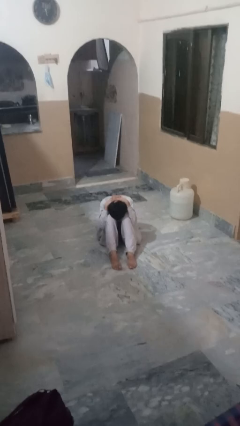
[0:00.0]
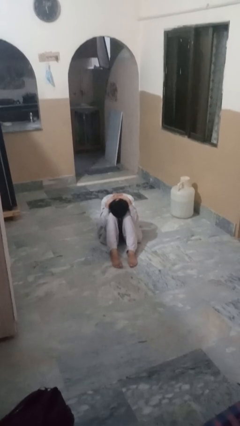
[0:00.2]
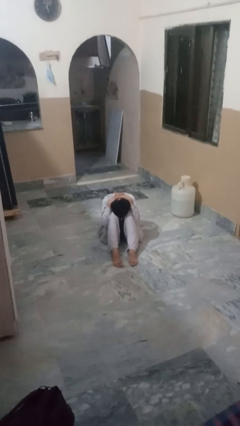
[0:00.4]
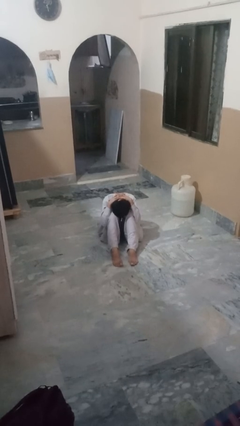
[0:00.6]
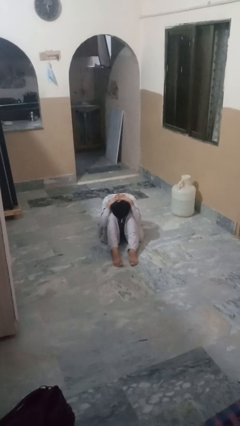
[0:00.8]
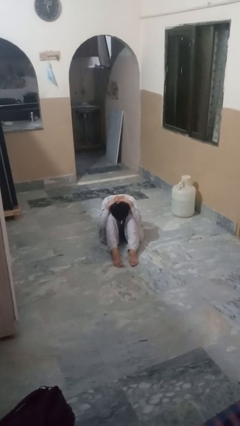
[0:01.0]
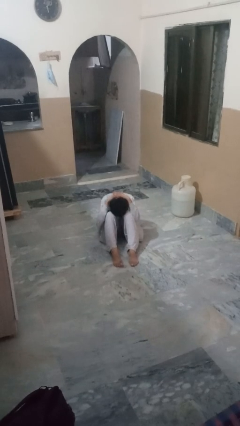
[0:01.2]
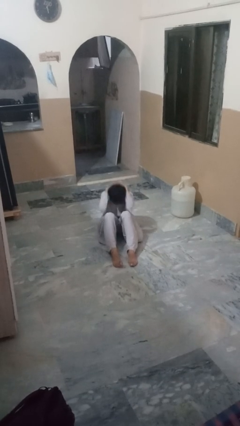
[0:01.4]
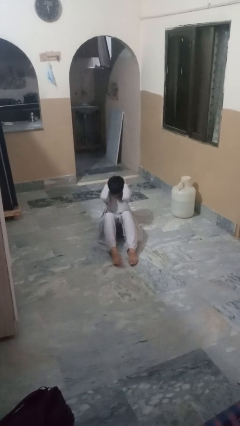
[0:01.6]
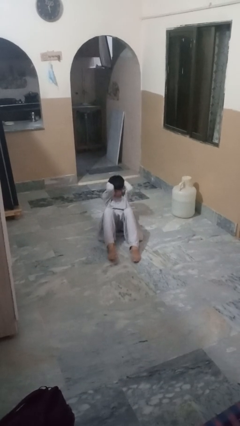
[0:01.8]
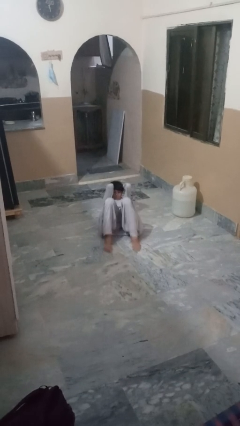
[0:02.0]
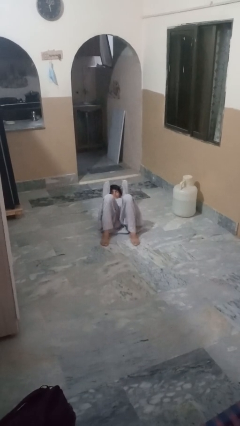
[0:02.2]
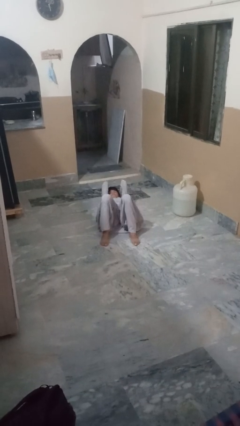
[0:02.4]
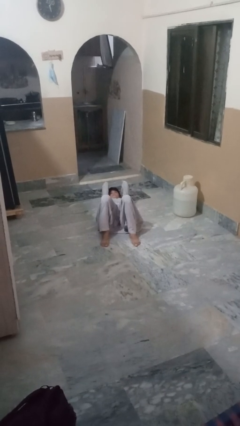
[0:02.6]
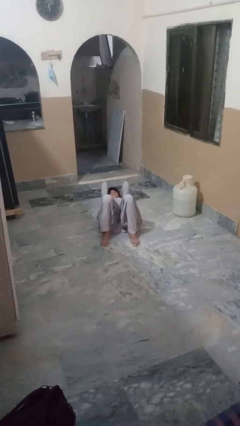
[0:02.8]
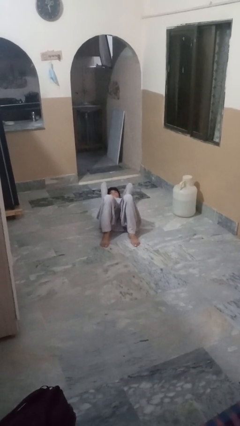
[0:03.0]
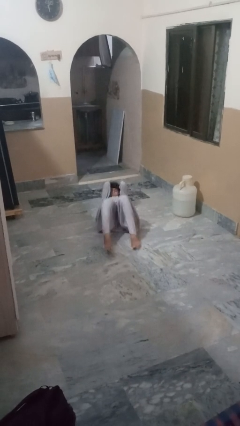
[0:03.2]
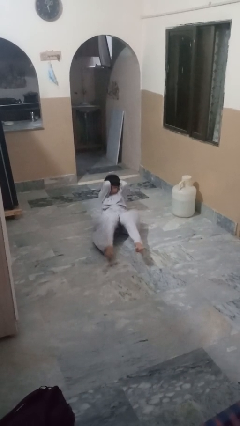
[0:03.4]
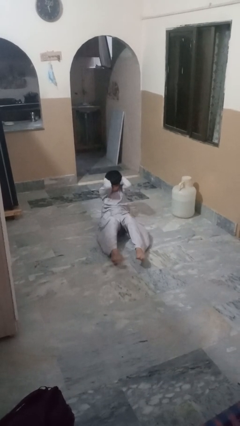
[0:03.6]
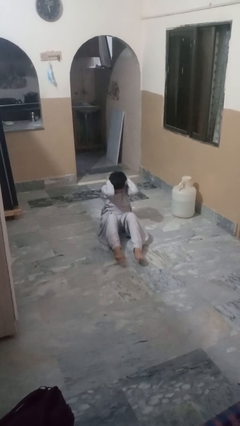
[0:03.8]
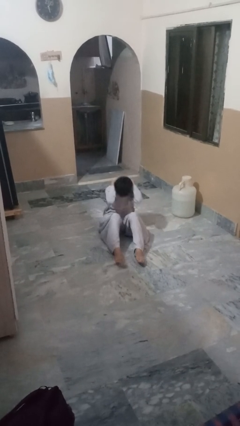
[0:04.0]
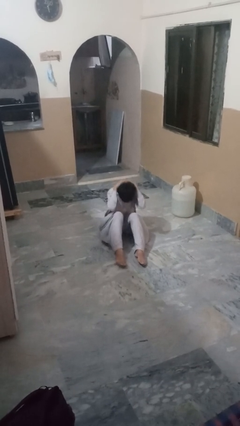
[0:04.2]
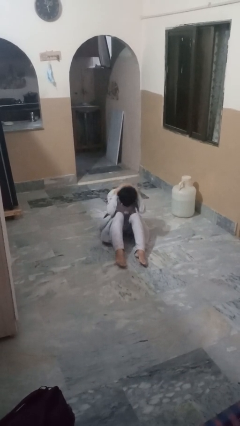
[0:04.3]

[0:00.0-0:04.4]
person exercises with situp

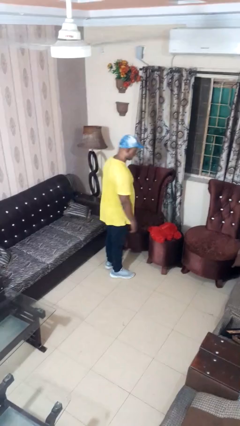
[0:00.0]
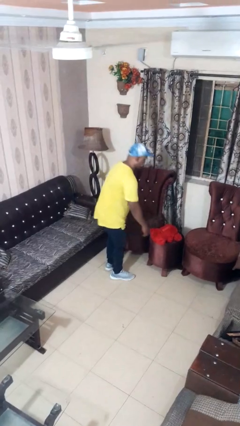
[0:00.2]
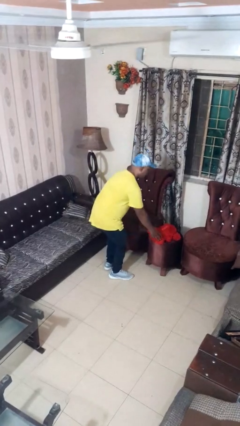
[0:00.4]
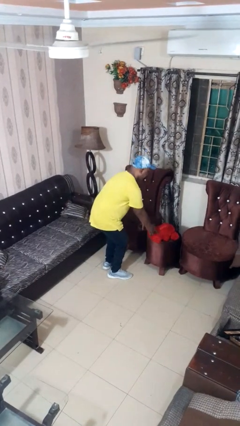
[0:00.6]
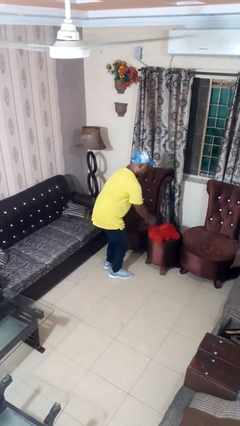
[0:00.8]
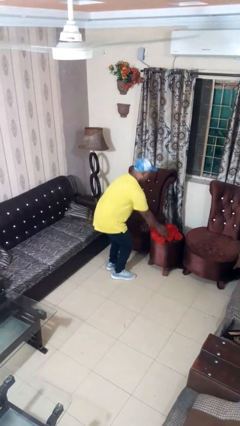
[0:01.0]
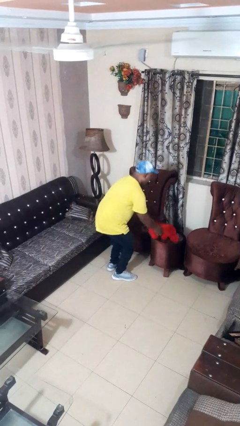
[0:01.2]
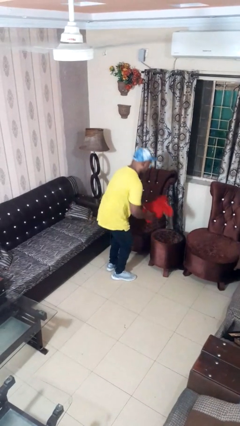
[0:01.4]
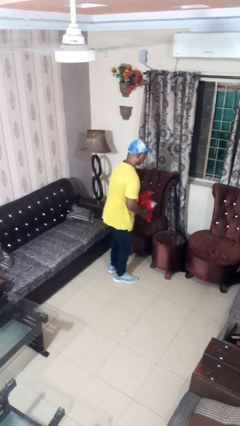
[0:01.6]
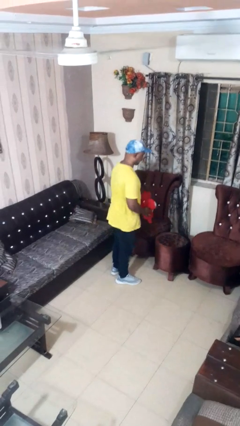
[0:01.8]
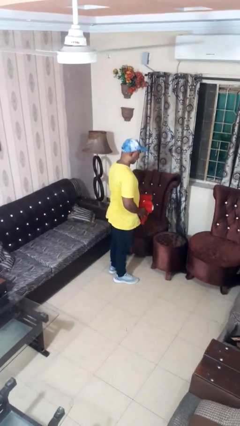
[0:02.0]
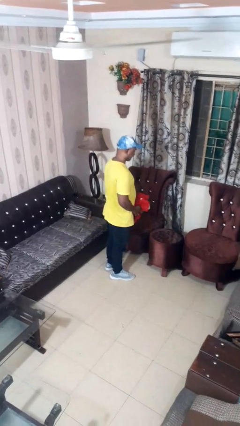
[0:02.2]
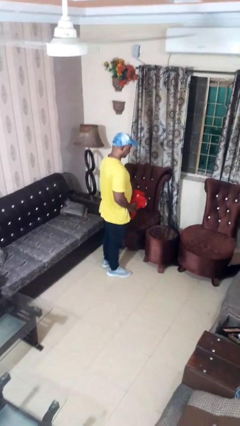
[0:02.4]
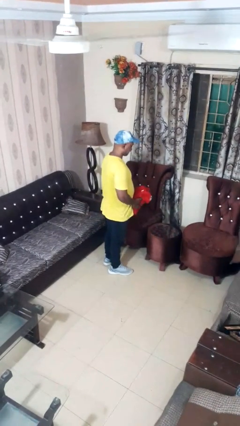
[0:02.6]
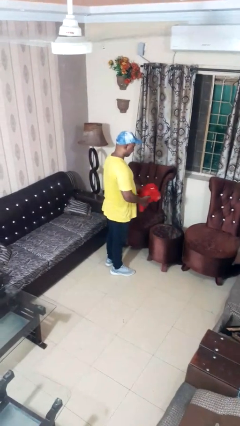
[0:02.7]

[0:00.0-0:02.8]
person picks up object from table

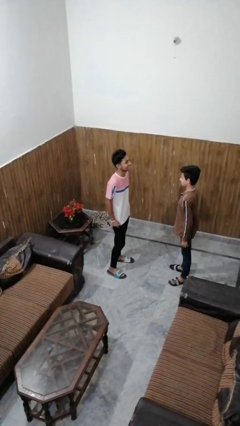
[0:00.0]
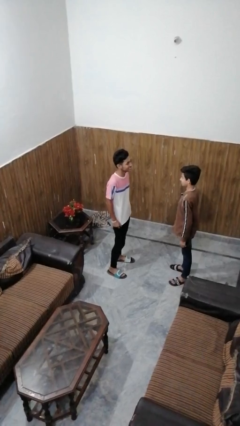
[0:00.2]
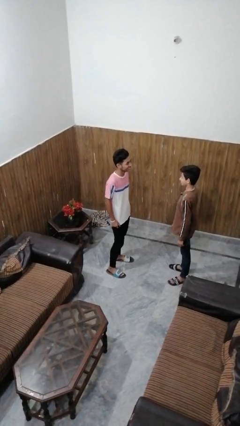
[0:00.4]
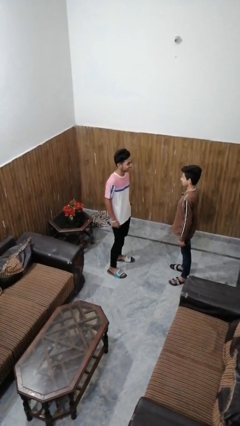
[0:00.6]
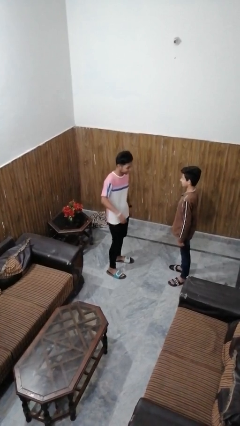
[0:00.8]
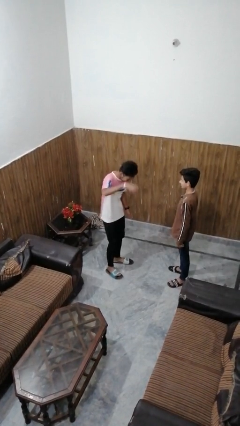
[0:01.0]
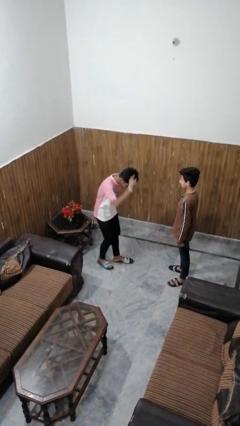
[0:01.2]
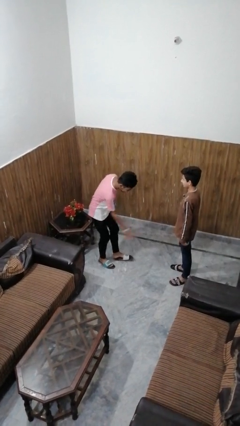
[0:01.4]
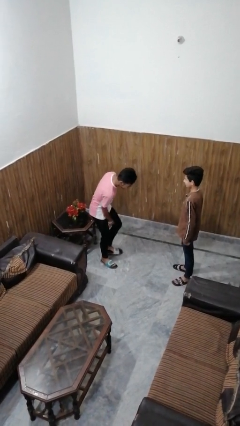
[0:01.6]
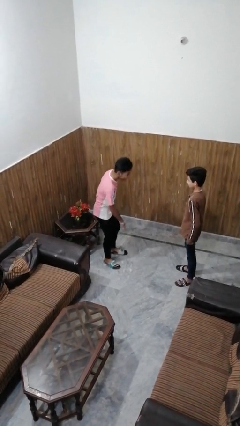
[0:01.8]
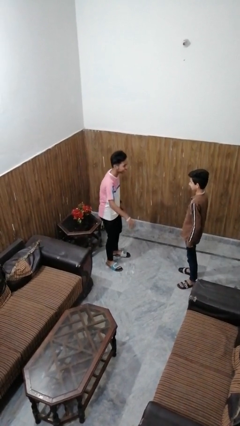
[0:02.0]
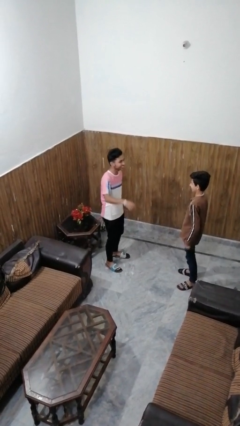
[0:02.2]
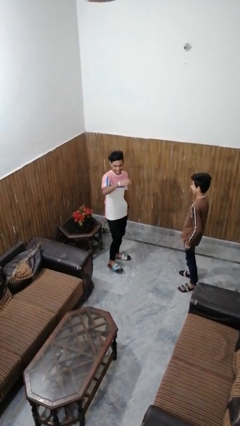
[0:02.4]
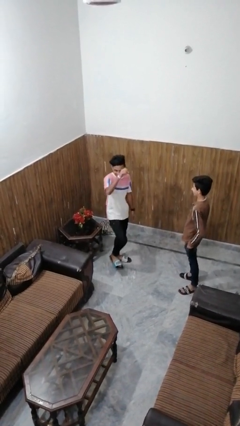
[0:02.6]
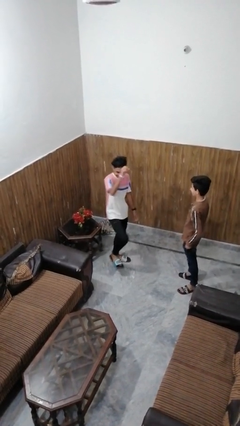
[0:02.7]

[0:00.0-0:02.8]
person laughs with person

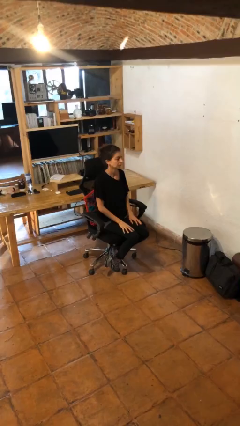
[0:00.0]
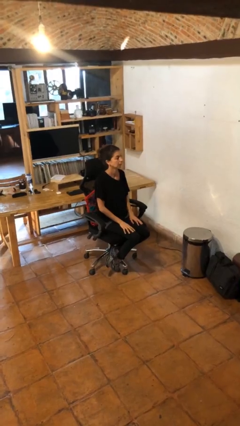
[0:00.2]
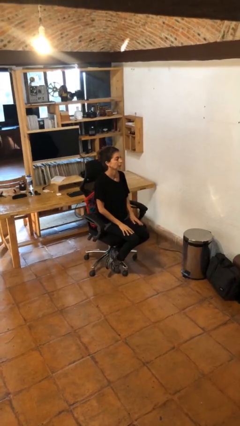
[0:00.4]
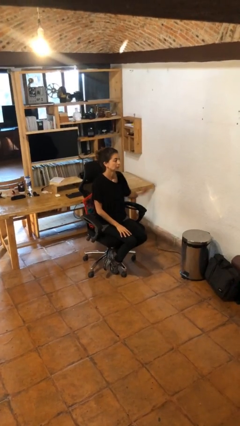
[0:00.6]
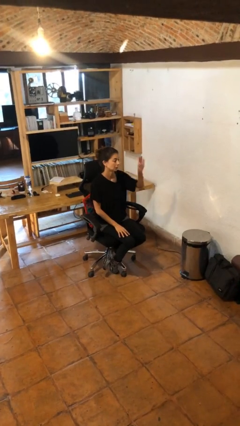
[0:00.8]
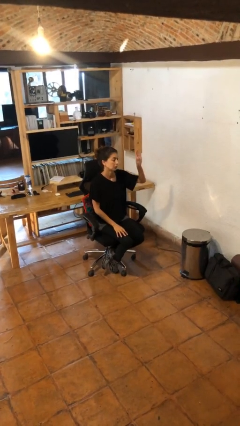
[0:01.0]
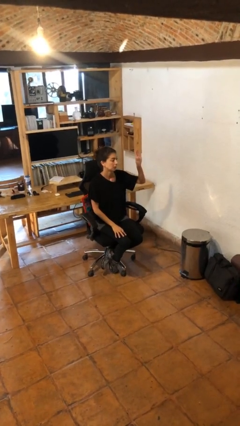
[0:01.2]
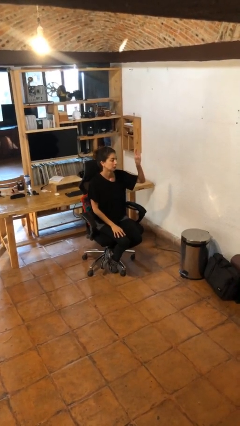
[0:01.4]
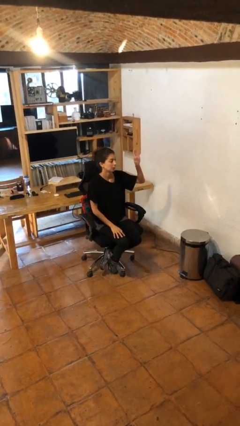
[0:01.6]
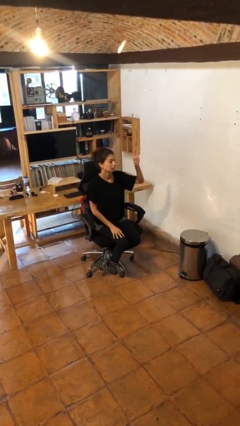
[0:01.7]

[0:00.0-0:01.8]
person gestures raise hand

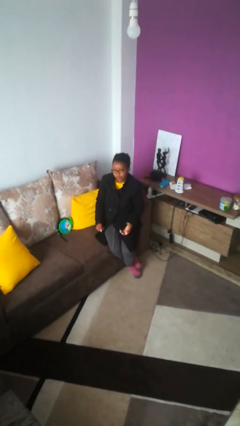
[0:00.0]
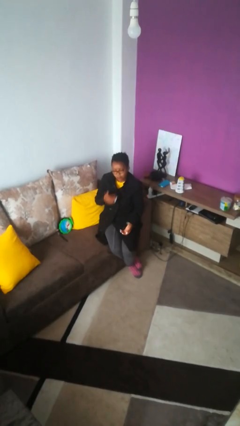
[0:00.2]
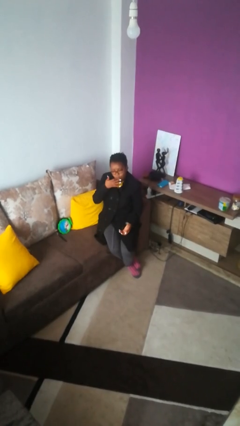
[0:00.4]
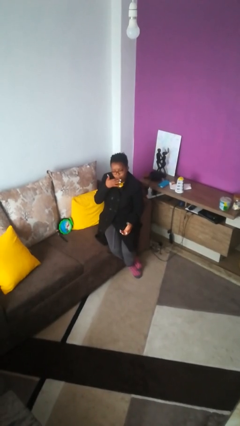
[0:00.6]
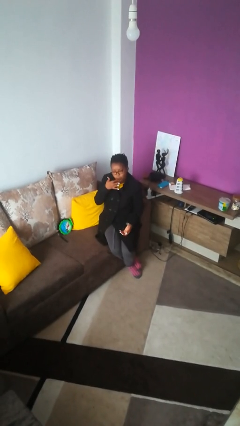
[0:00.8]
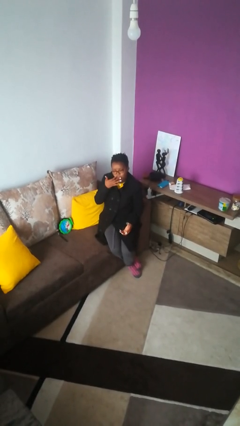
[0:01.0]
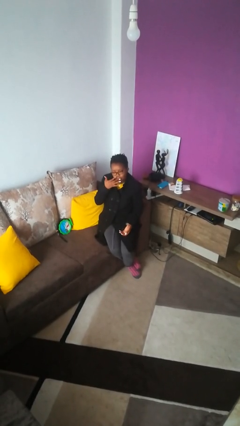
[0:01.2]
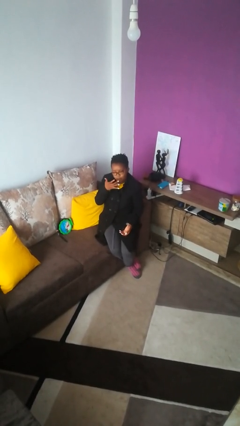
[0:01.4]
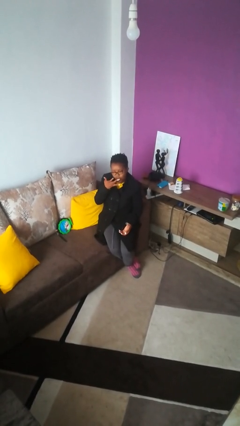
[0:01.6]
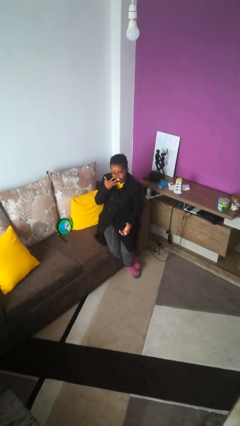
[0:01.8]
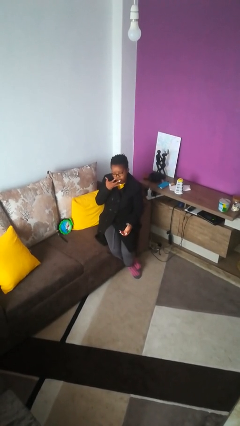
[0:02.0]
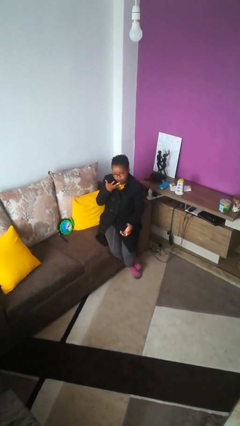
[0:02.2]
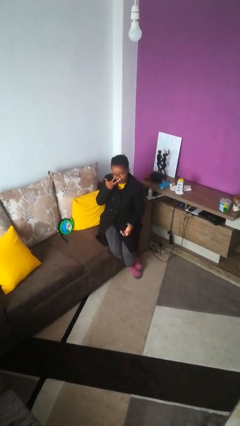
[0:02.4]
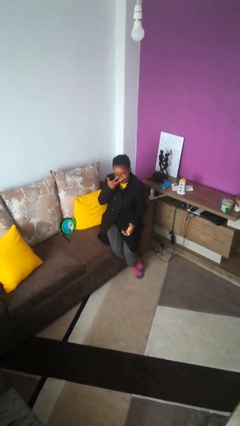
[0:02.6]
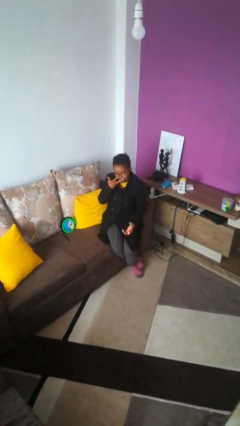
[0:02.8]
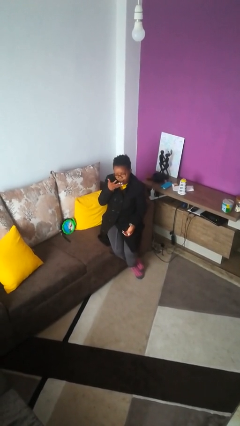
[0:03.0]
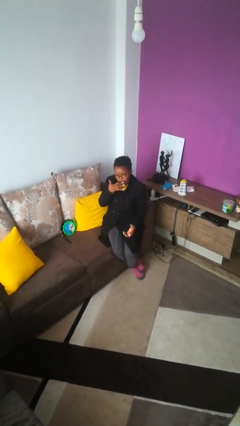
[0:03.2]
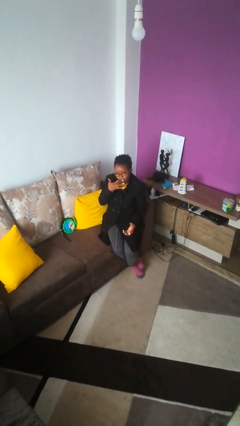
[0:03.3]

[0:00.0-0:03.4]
person licks fingers

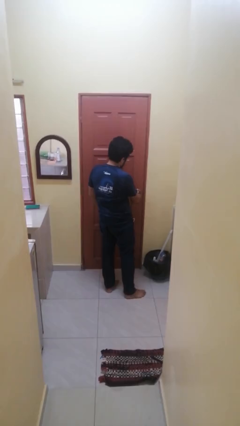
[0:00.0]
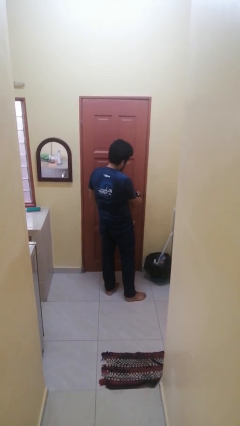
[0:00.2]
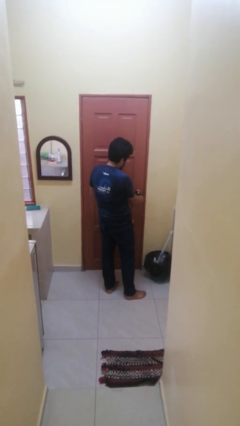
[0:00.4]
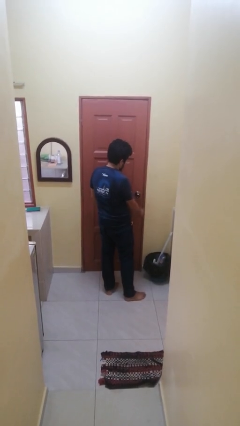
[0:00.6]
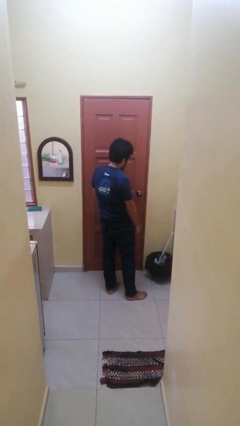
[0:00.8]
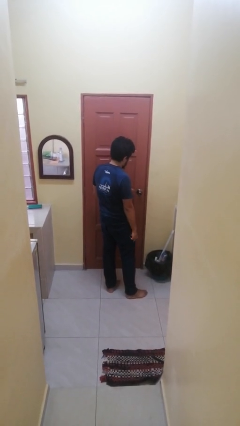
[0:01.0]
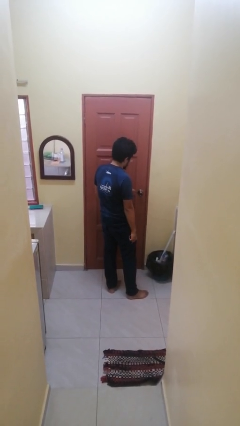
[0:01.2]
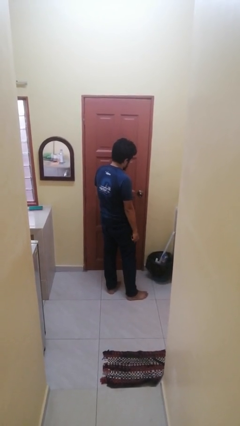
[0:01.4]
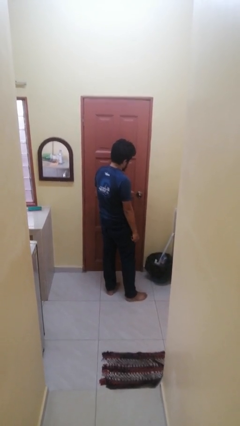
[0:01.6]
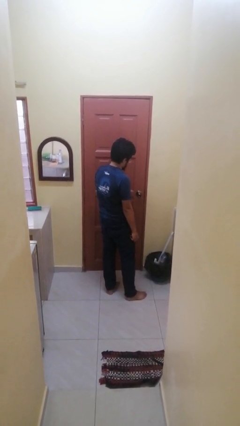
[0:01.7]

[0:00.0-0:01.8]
person unlocks door with keys
